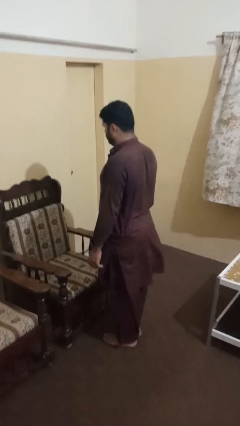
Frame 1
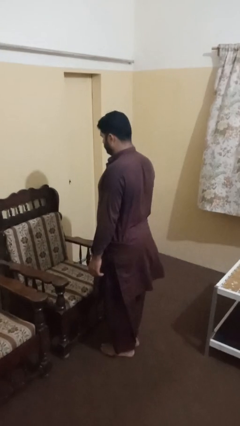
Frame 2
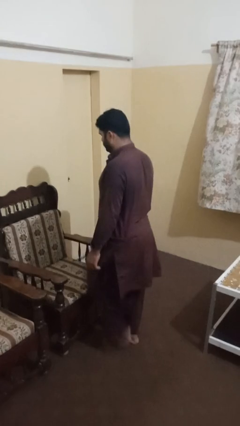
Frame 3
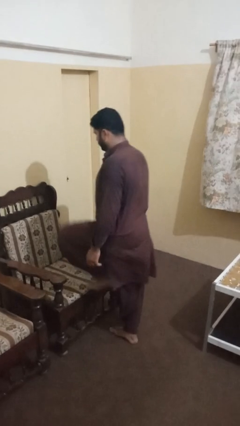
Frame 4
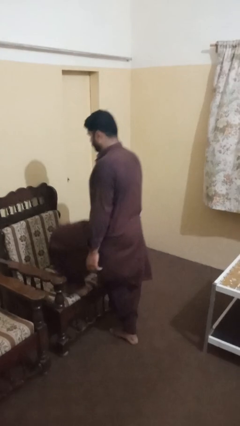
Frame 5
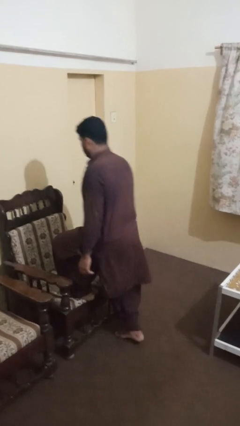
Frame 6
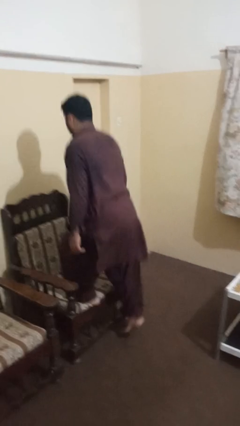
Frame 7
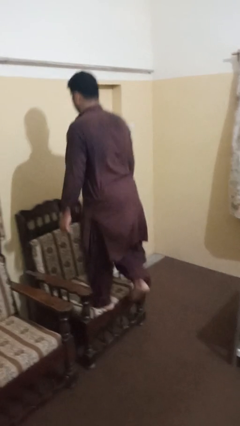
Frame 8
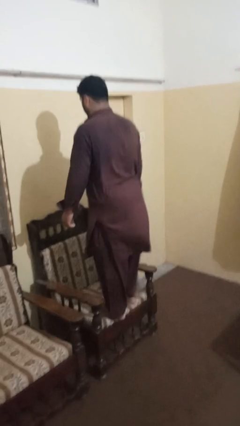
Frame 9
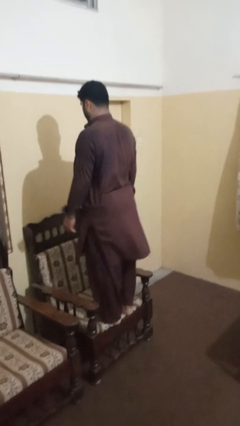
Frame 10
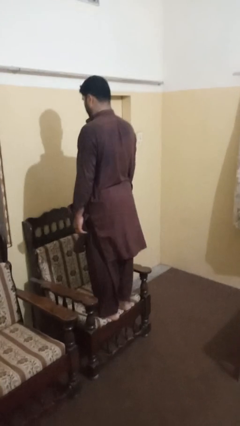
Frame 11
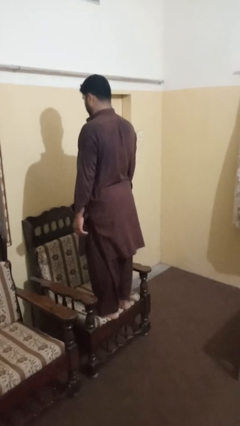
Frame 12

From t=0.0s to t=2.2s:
person climbs on chair

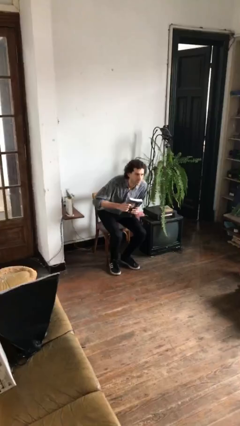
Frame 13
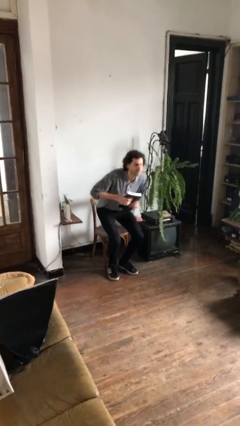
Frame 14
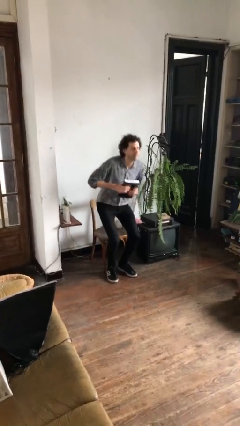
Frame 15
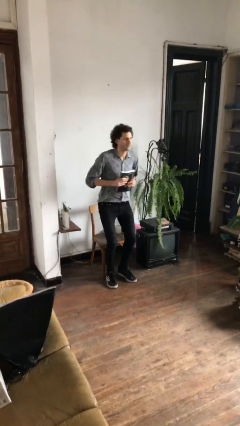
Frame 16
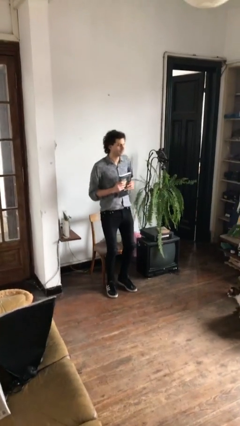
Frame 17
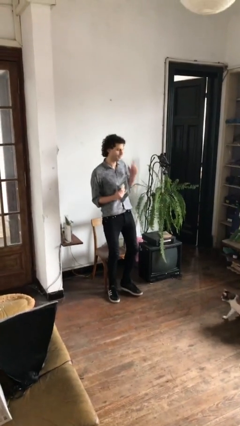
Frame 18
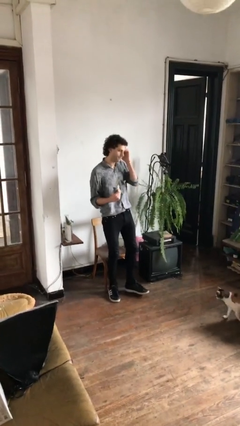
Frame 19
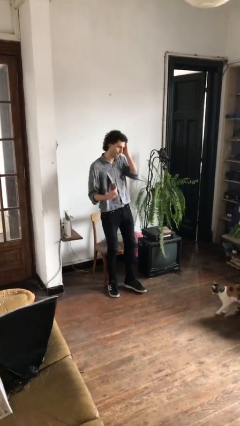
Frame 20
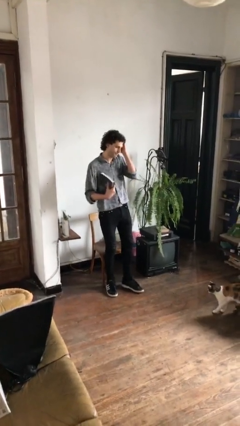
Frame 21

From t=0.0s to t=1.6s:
person stands up

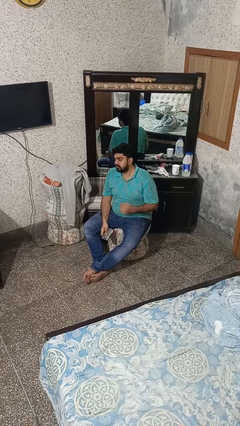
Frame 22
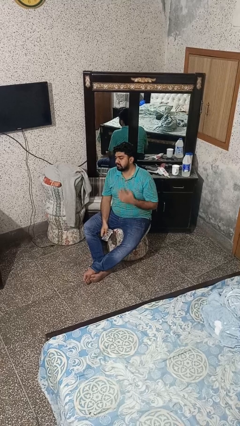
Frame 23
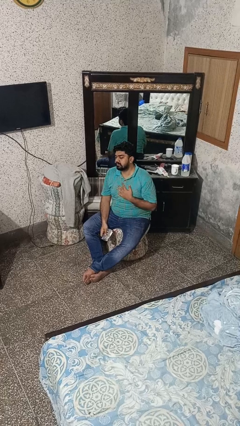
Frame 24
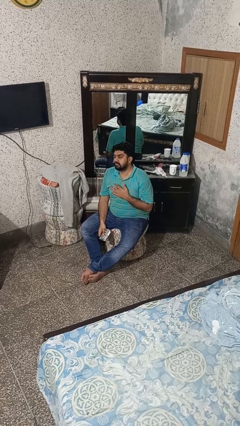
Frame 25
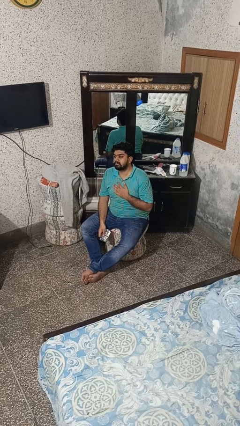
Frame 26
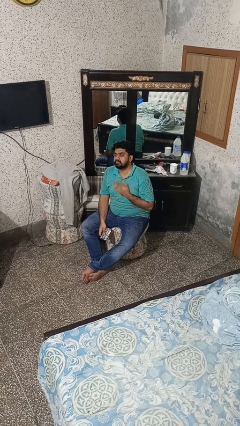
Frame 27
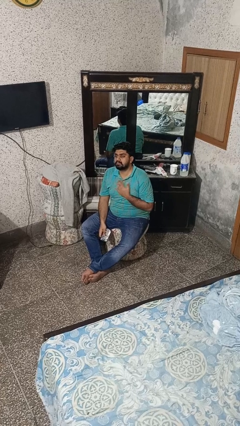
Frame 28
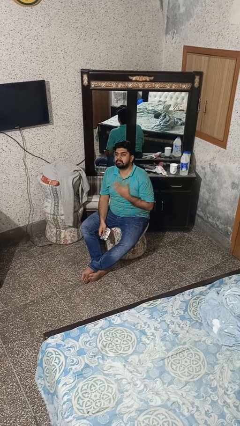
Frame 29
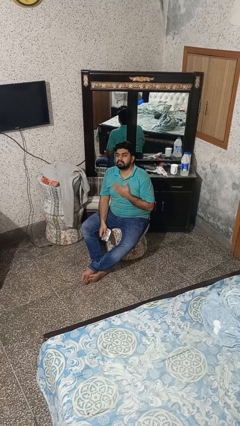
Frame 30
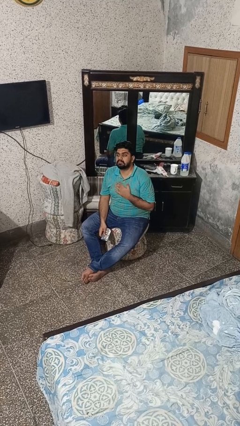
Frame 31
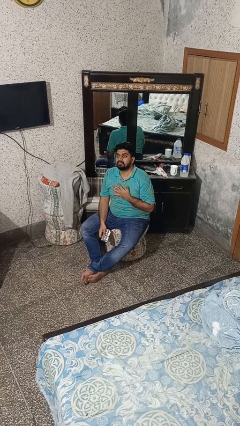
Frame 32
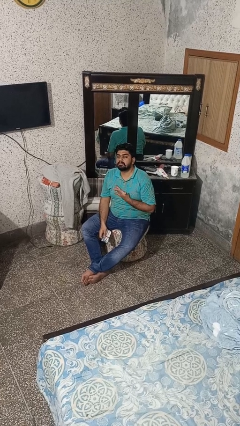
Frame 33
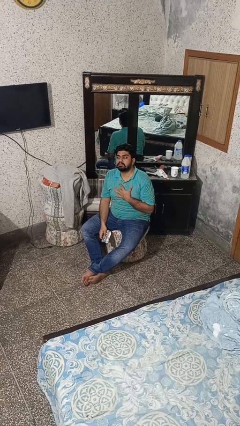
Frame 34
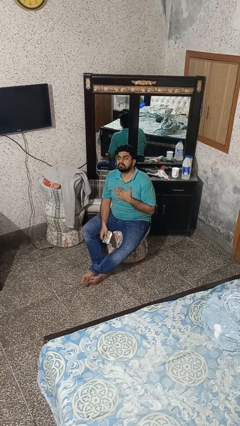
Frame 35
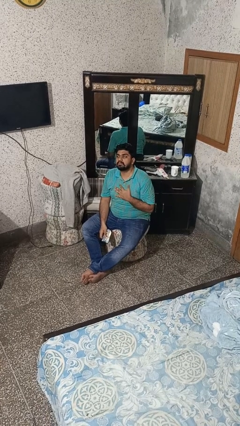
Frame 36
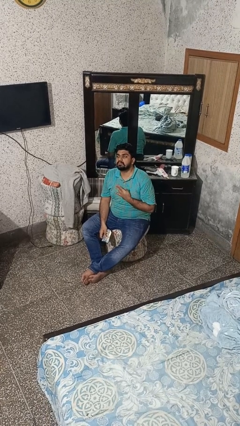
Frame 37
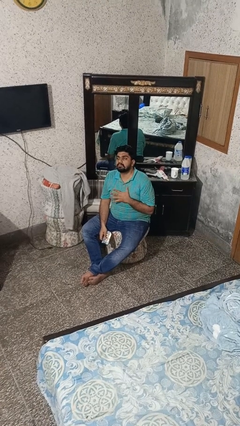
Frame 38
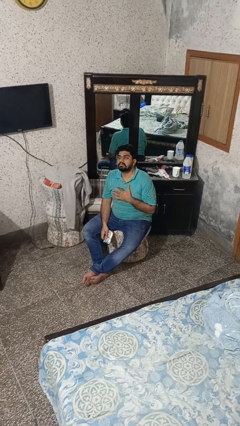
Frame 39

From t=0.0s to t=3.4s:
person drums on chest

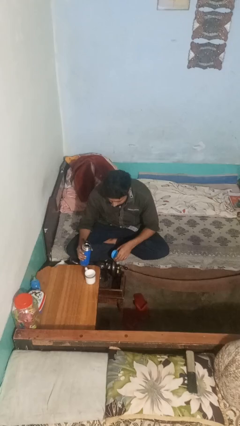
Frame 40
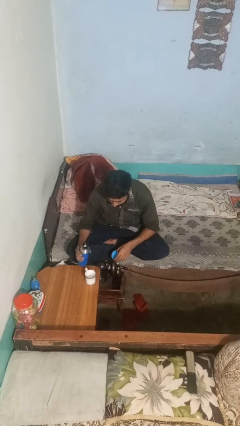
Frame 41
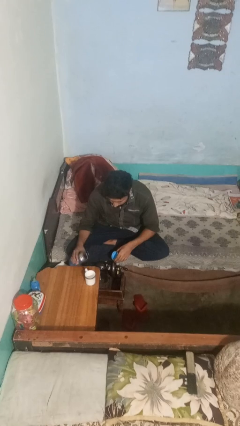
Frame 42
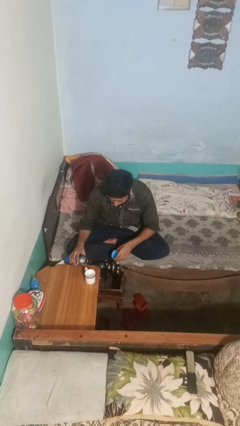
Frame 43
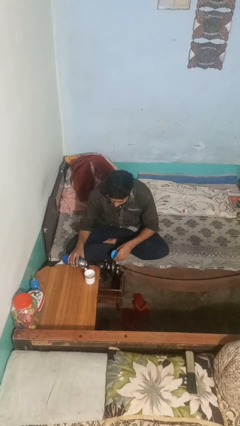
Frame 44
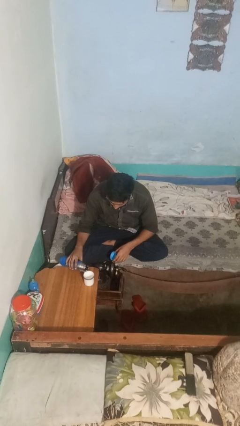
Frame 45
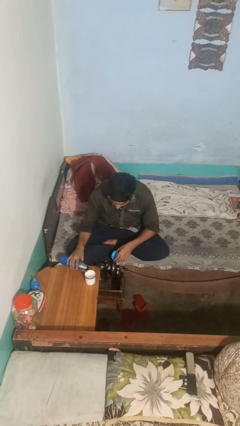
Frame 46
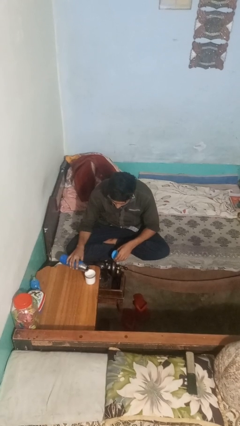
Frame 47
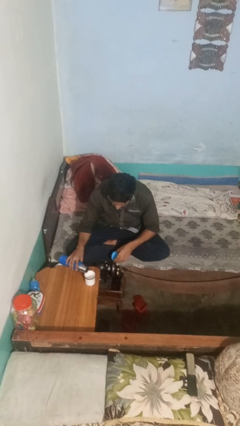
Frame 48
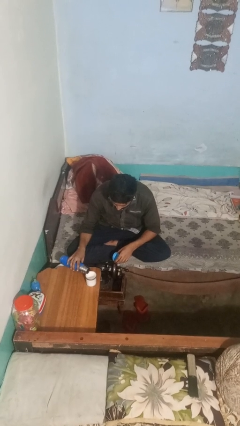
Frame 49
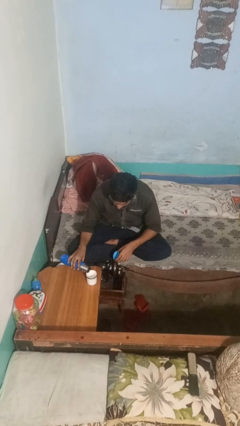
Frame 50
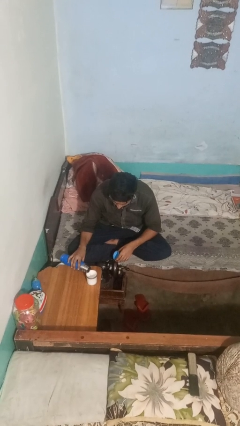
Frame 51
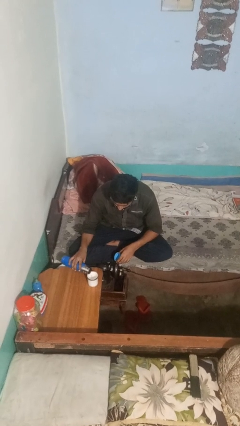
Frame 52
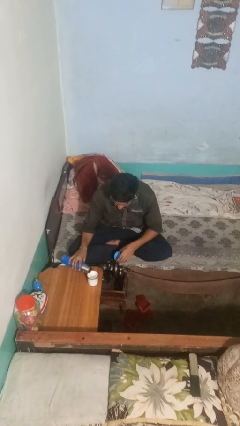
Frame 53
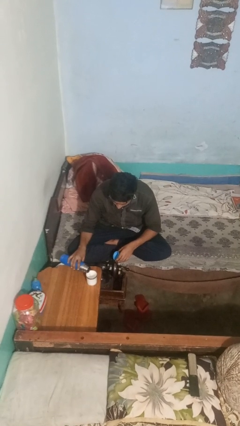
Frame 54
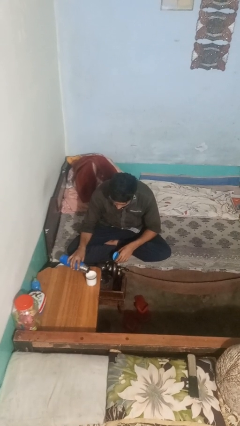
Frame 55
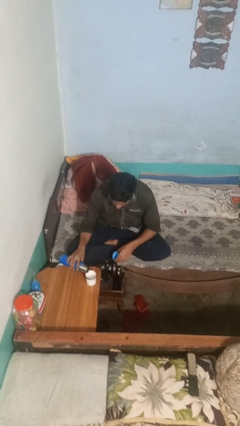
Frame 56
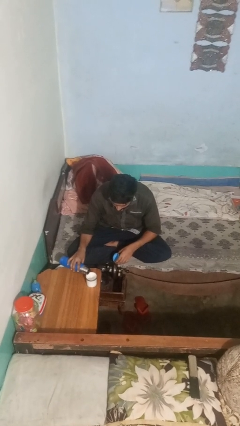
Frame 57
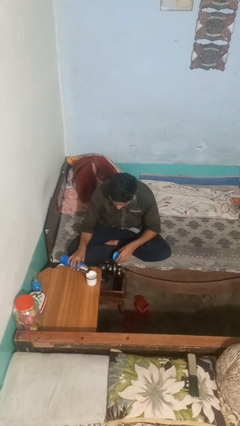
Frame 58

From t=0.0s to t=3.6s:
person pours liquid into cup

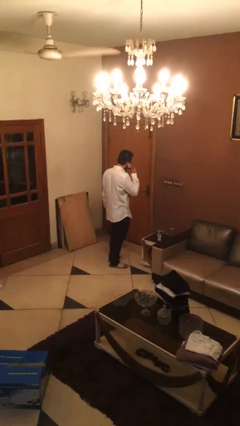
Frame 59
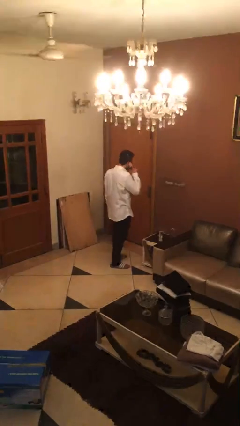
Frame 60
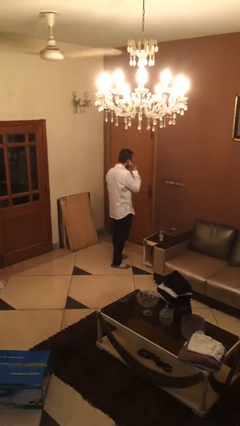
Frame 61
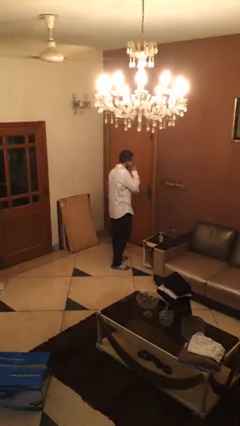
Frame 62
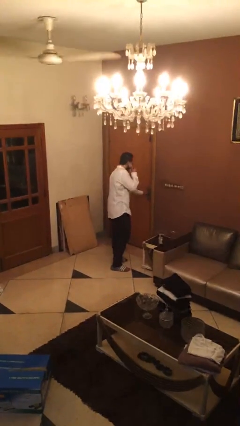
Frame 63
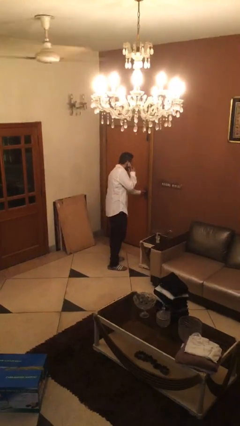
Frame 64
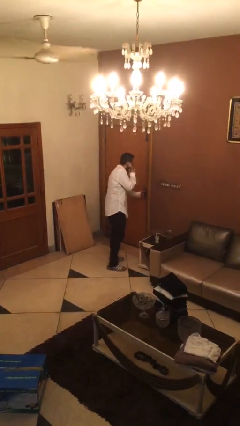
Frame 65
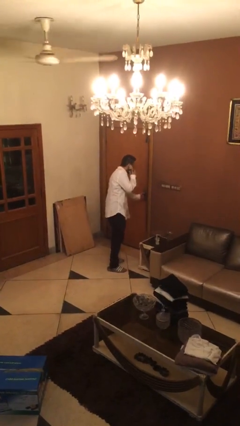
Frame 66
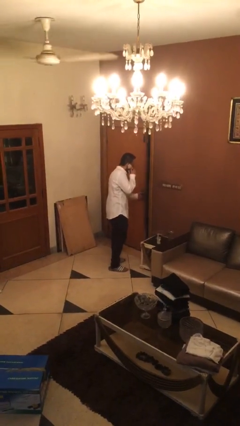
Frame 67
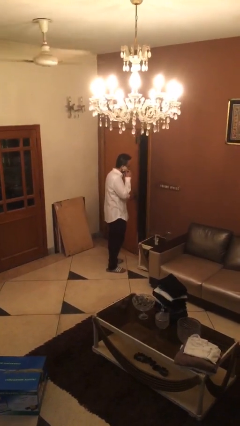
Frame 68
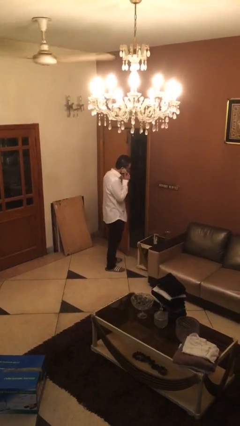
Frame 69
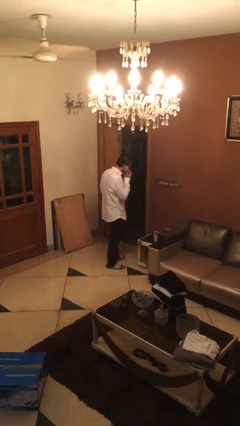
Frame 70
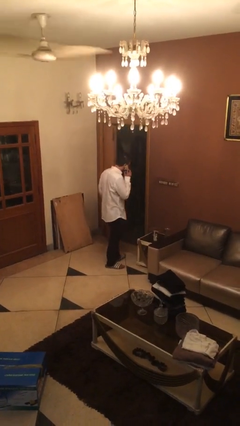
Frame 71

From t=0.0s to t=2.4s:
person opens facility door

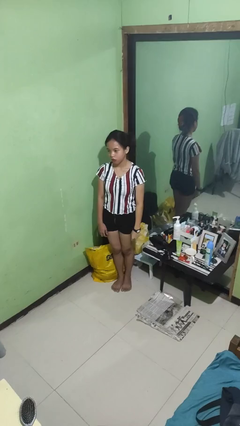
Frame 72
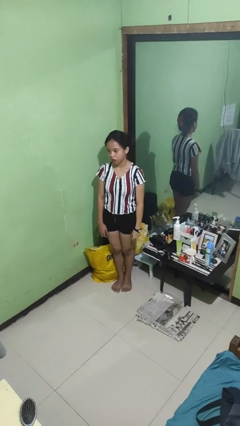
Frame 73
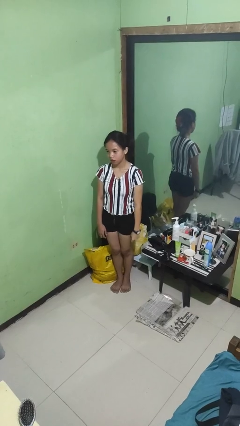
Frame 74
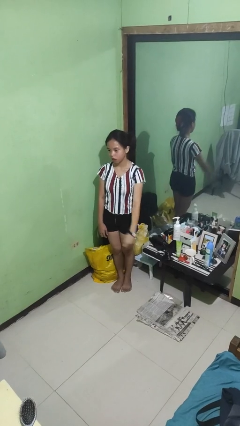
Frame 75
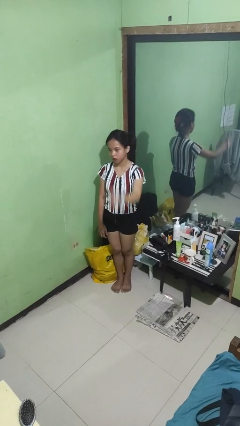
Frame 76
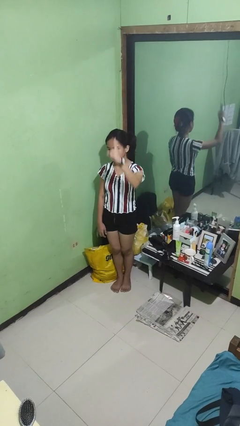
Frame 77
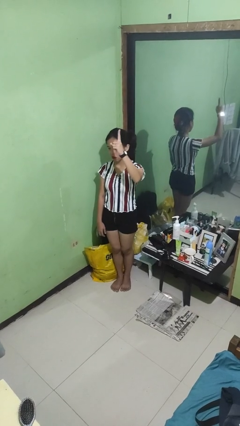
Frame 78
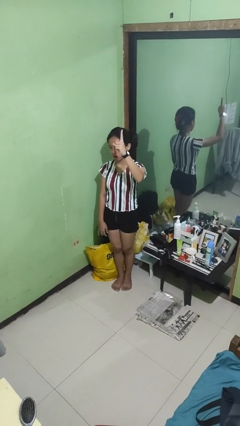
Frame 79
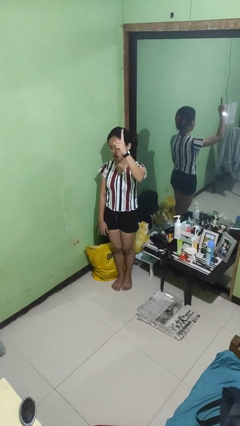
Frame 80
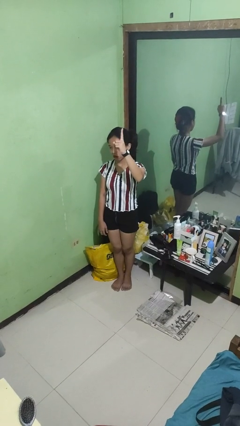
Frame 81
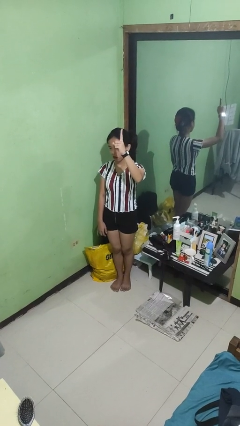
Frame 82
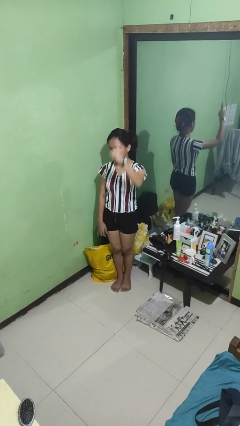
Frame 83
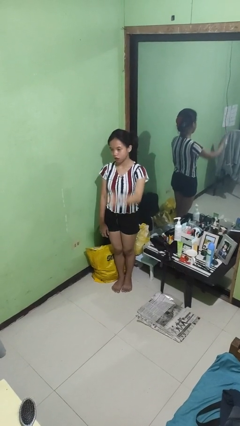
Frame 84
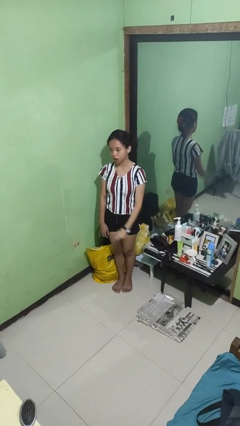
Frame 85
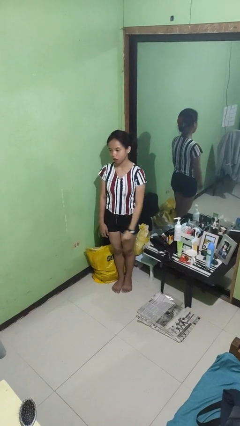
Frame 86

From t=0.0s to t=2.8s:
person gestures number one

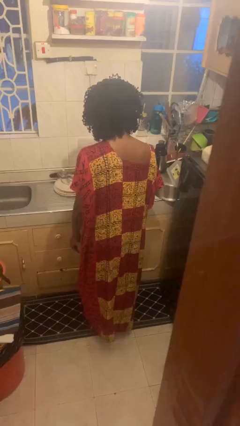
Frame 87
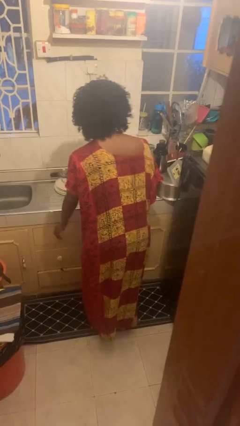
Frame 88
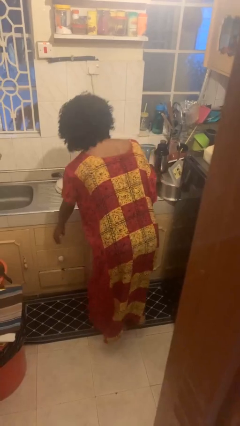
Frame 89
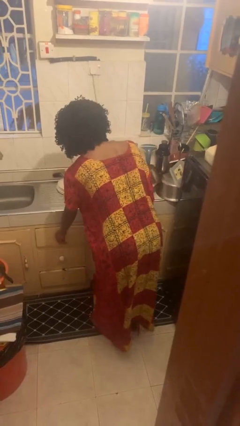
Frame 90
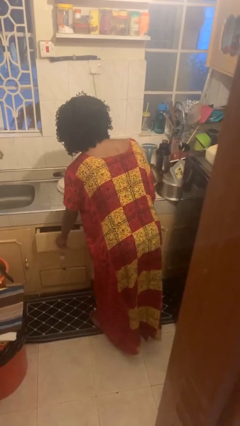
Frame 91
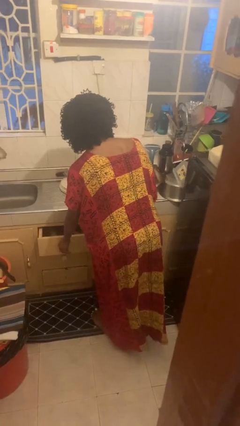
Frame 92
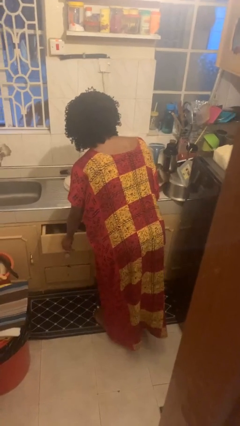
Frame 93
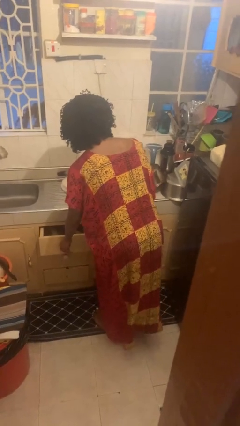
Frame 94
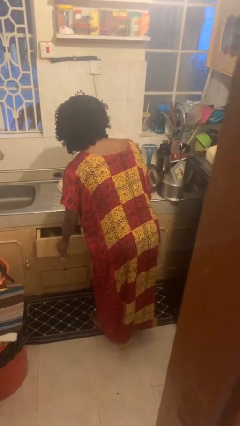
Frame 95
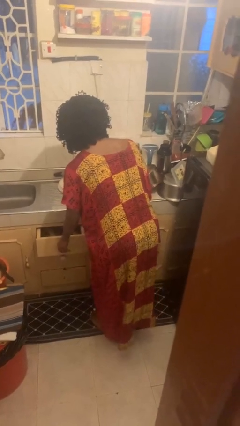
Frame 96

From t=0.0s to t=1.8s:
person opens kitchen drawer
